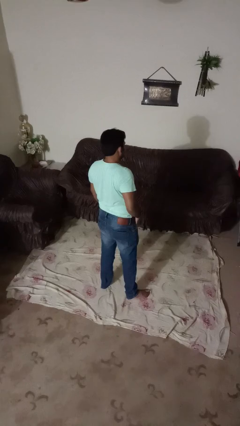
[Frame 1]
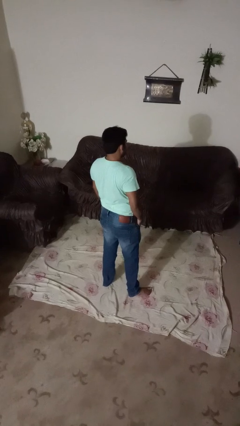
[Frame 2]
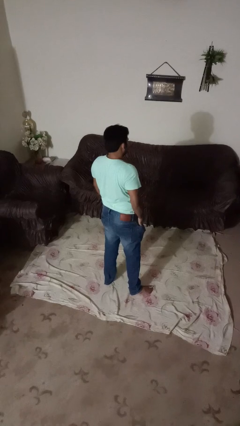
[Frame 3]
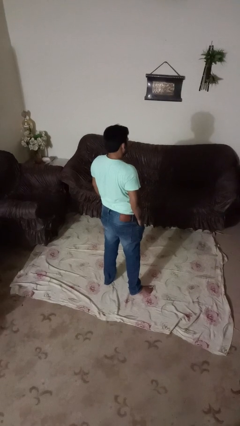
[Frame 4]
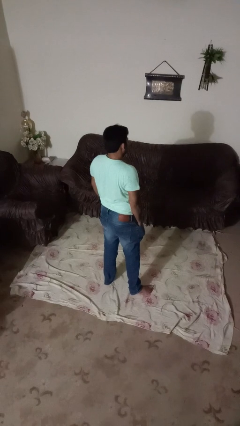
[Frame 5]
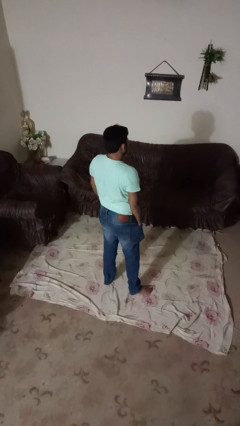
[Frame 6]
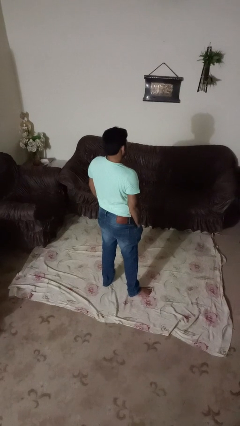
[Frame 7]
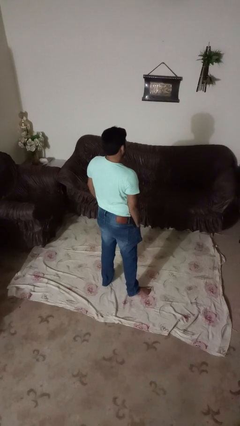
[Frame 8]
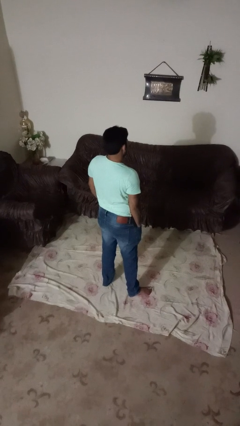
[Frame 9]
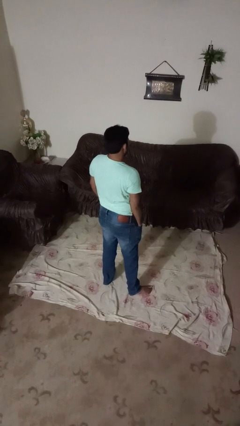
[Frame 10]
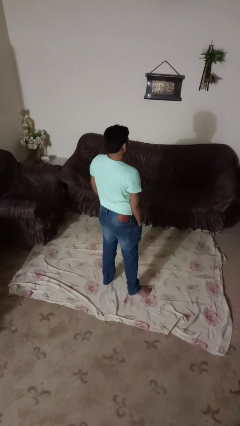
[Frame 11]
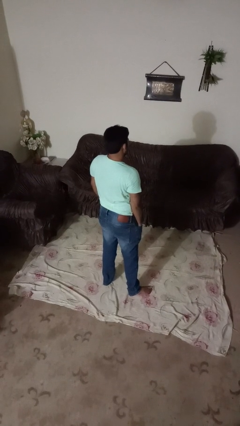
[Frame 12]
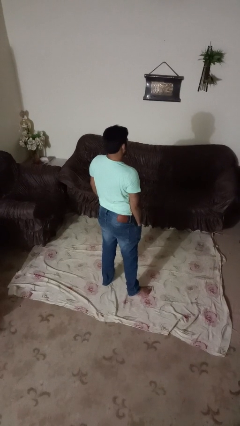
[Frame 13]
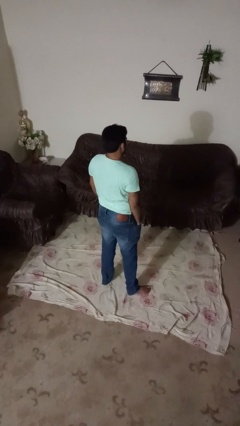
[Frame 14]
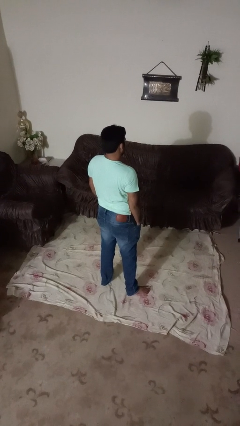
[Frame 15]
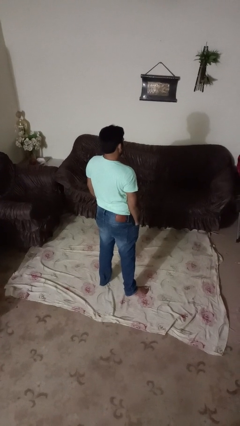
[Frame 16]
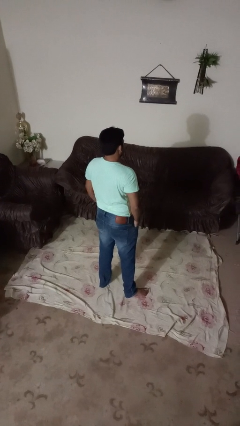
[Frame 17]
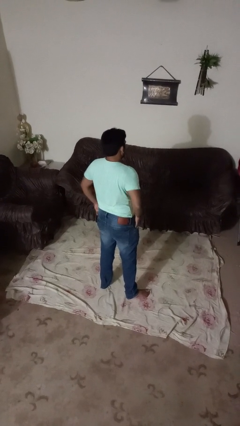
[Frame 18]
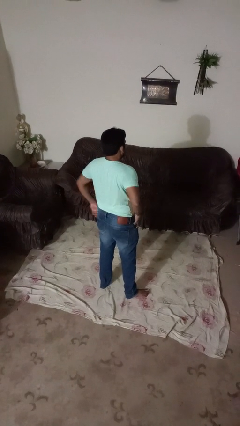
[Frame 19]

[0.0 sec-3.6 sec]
person puts hands in back pockets

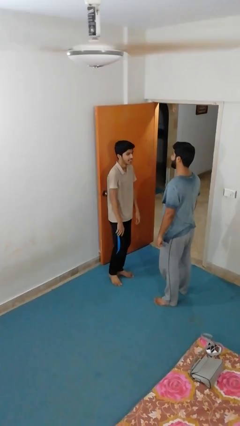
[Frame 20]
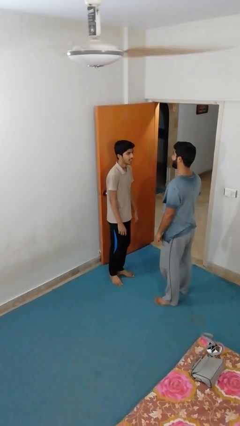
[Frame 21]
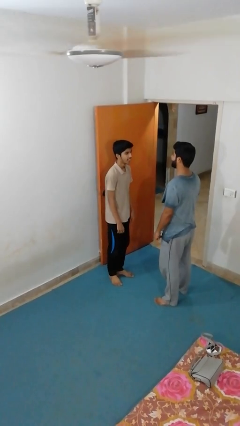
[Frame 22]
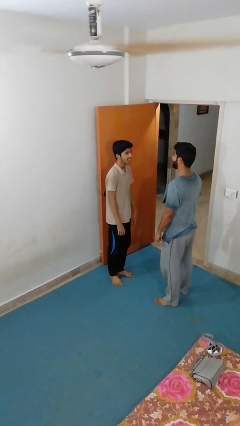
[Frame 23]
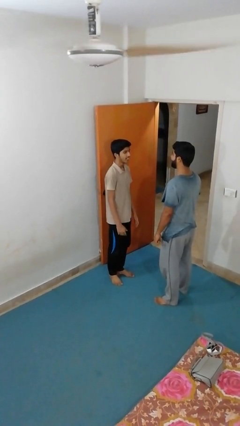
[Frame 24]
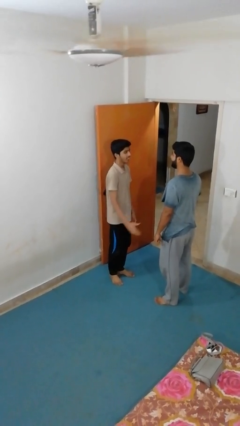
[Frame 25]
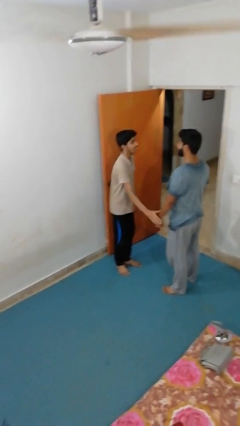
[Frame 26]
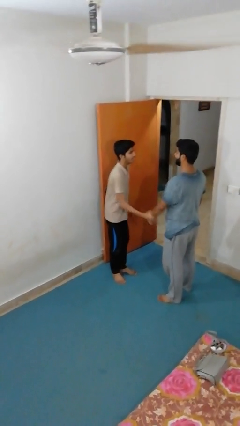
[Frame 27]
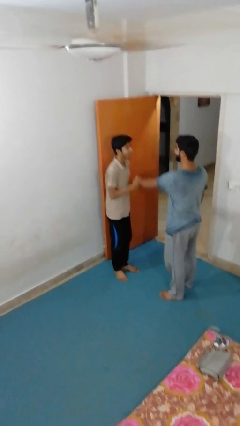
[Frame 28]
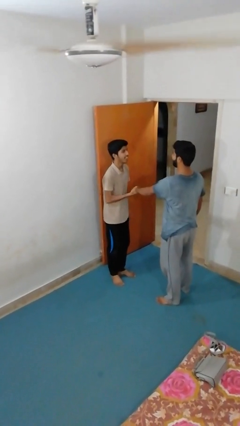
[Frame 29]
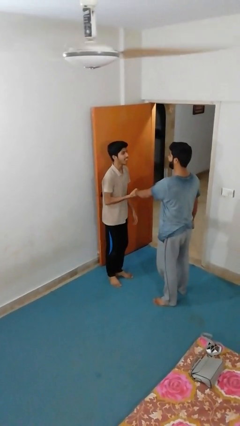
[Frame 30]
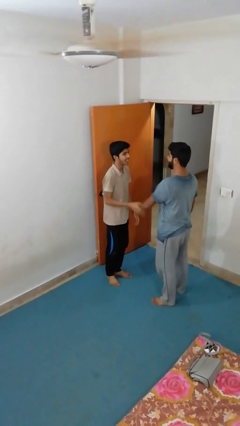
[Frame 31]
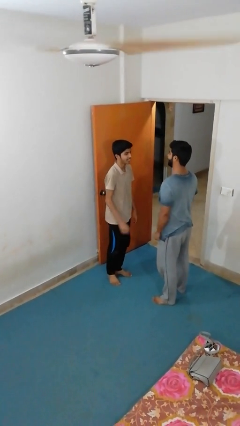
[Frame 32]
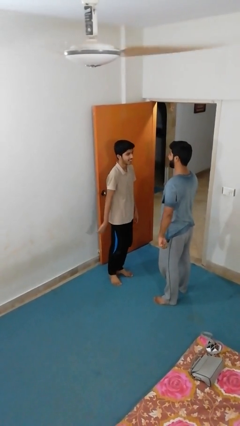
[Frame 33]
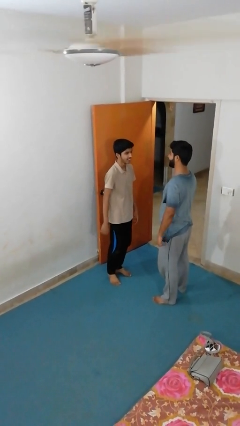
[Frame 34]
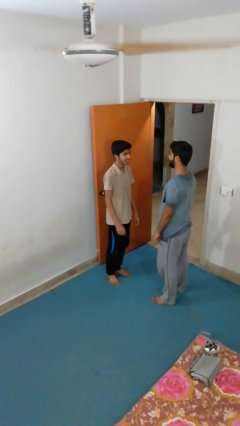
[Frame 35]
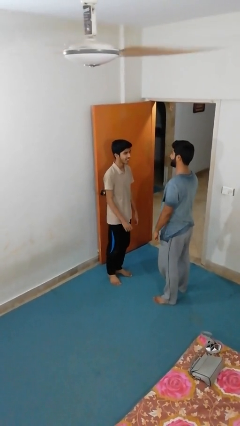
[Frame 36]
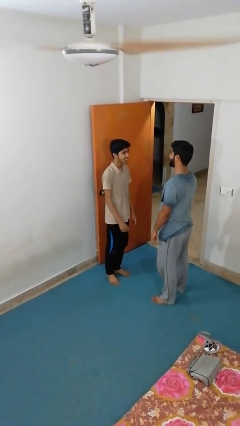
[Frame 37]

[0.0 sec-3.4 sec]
person grabs person by forearm

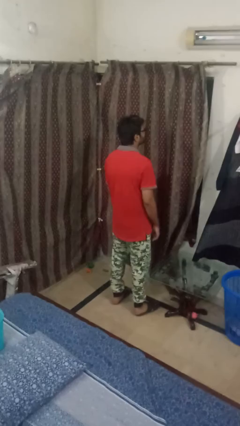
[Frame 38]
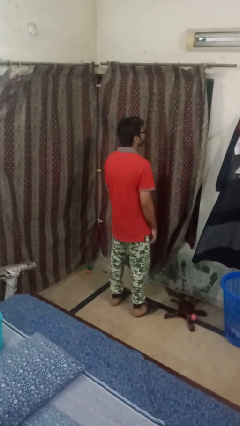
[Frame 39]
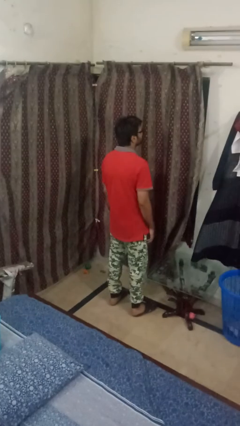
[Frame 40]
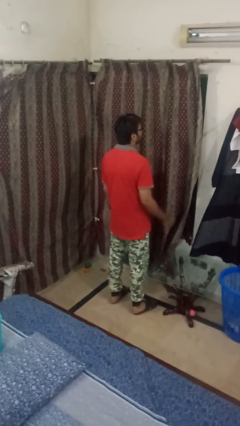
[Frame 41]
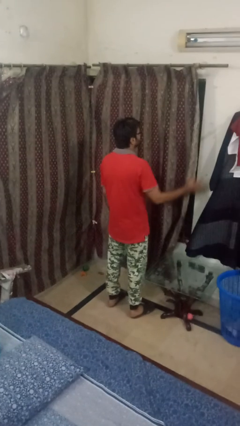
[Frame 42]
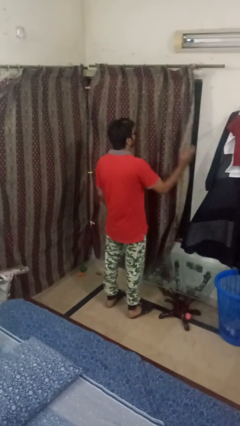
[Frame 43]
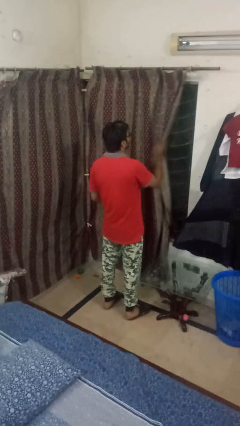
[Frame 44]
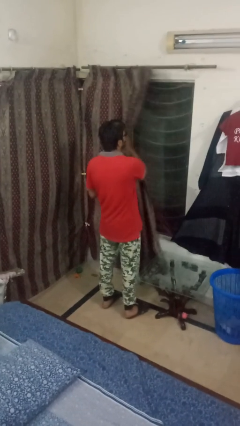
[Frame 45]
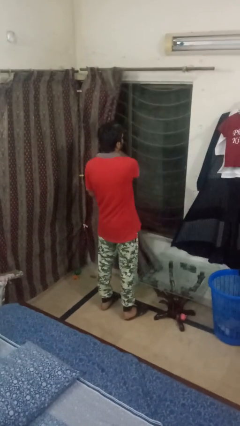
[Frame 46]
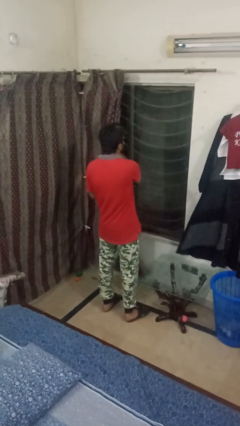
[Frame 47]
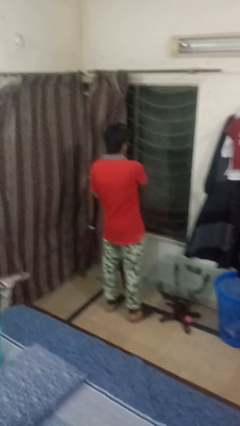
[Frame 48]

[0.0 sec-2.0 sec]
person opens curtains

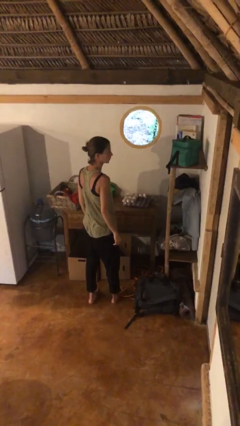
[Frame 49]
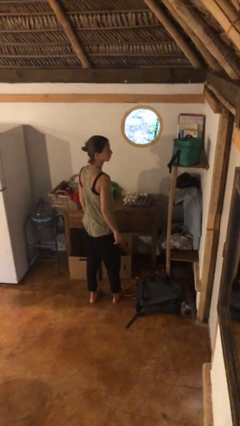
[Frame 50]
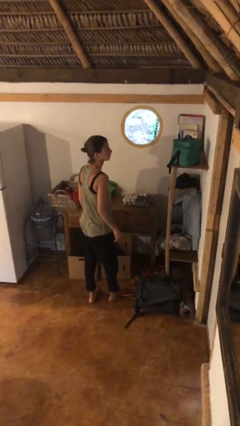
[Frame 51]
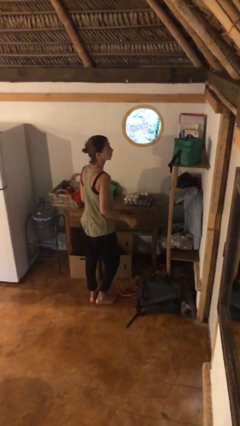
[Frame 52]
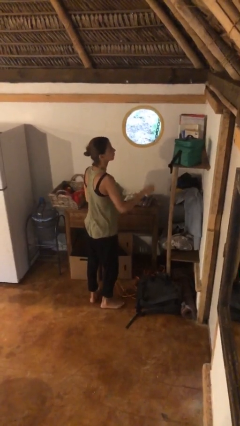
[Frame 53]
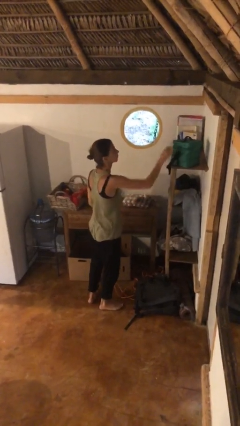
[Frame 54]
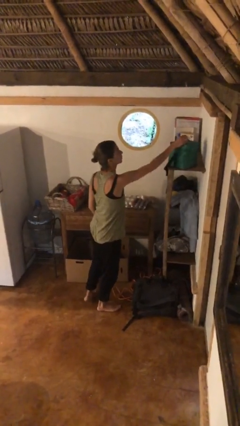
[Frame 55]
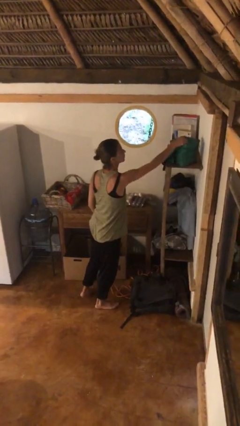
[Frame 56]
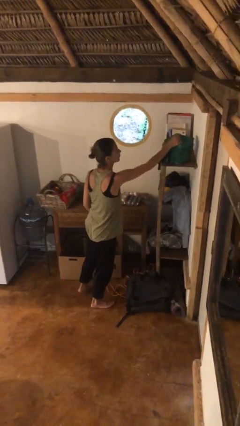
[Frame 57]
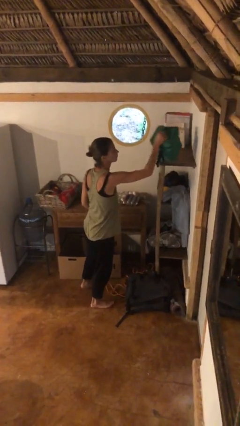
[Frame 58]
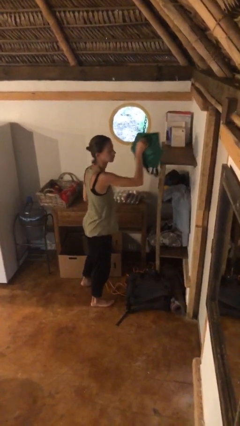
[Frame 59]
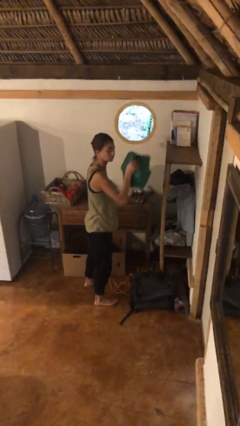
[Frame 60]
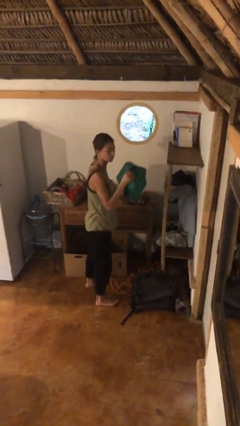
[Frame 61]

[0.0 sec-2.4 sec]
person picks up object from shelf

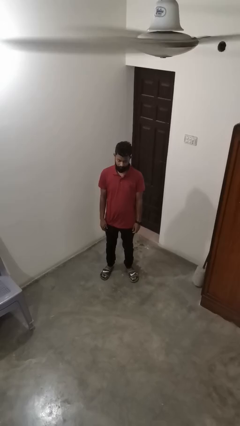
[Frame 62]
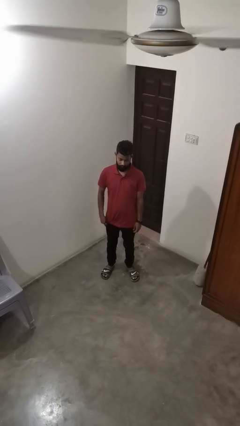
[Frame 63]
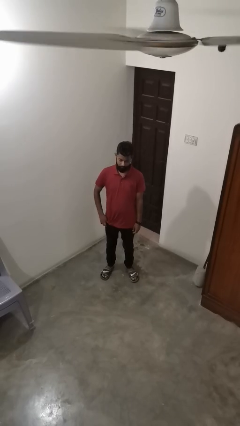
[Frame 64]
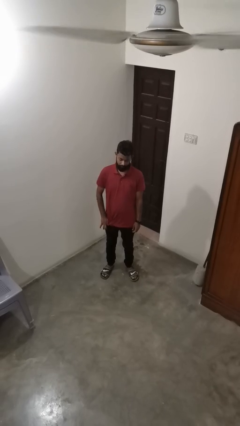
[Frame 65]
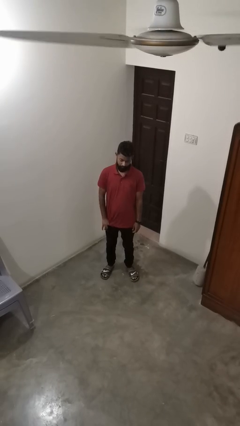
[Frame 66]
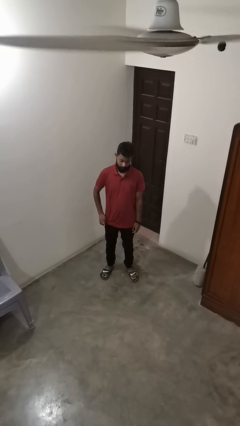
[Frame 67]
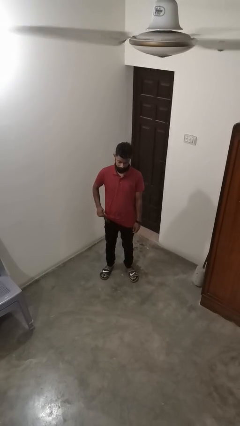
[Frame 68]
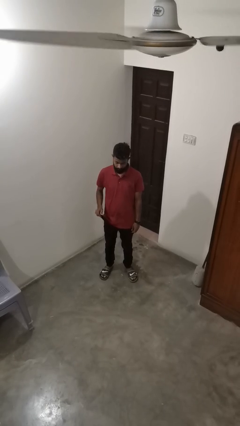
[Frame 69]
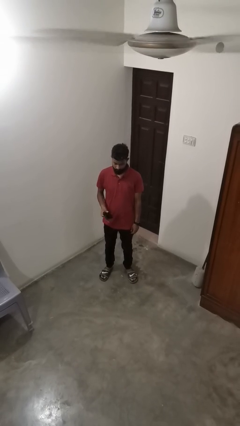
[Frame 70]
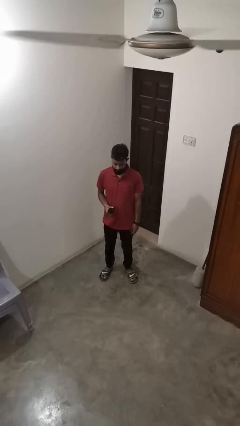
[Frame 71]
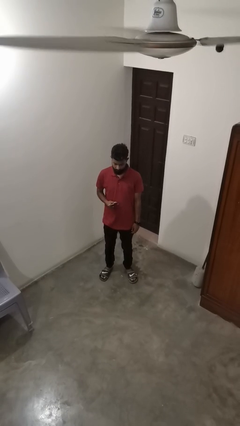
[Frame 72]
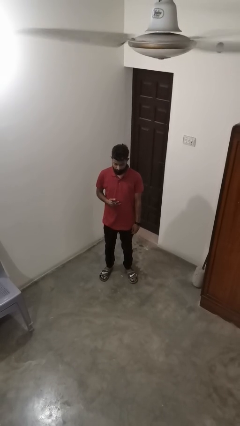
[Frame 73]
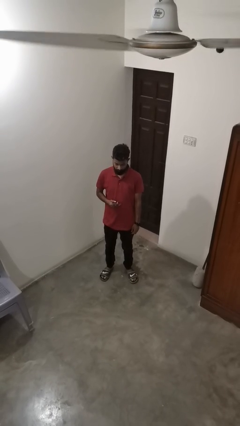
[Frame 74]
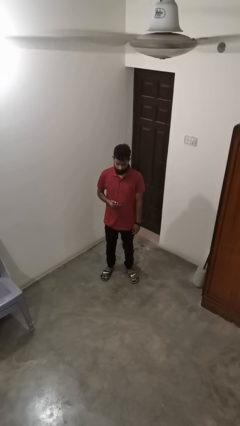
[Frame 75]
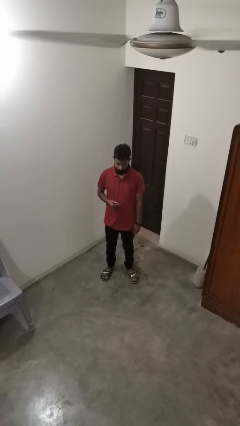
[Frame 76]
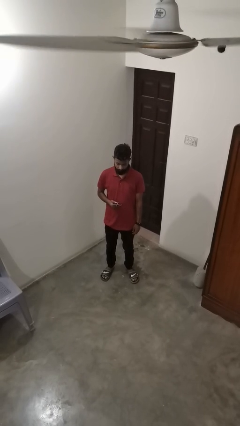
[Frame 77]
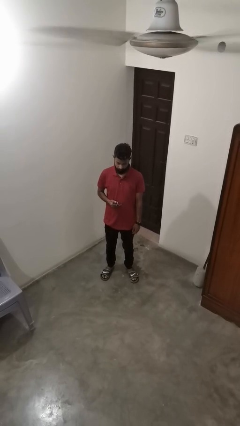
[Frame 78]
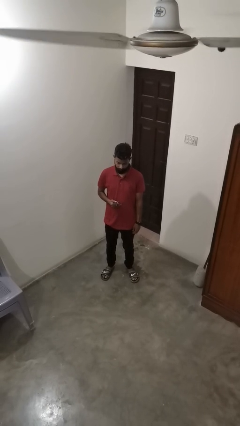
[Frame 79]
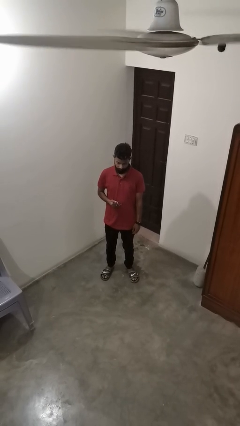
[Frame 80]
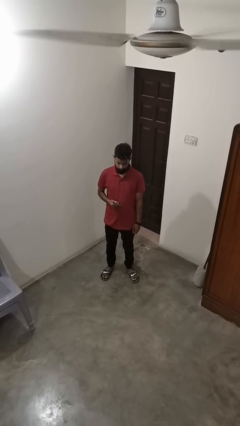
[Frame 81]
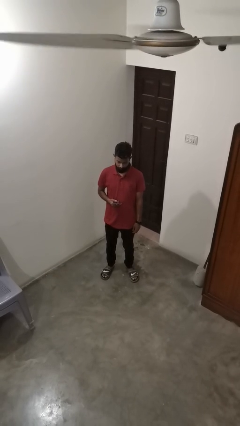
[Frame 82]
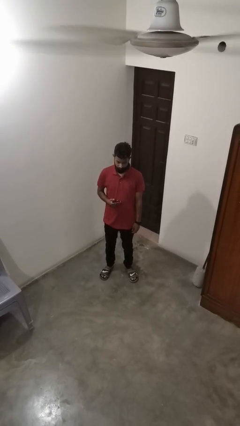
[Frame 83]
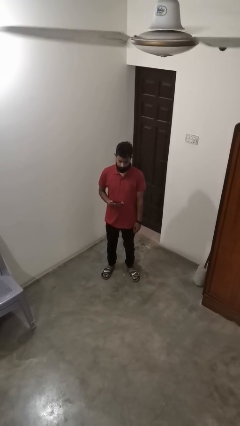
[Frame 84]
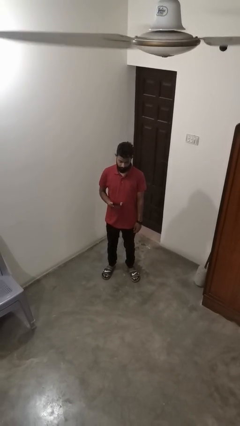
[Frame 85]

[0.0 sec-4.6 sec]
person takes phone from pocket

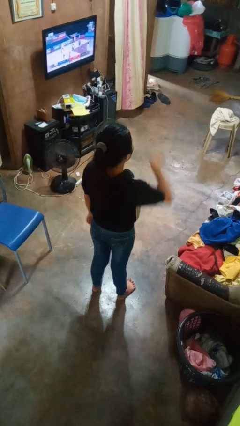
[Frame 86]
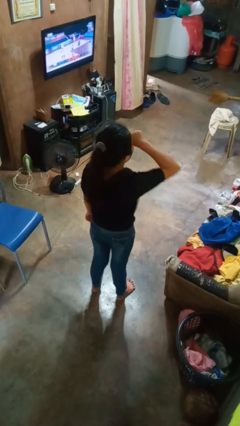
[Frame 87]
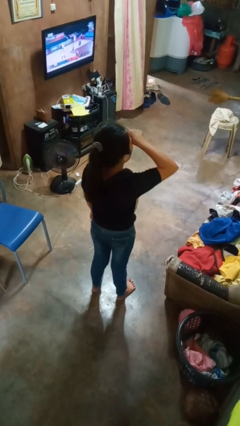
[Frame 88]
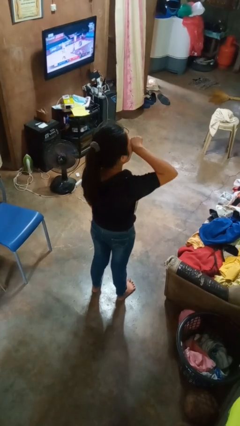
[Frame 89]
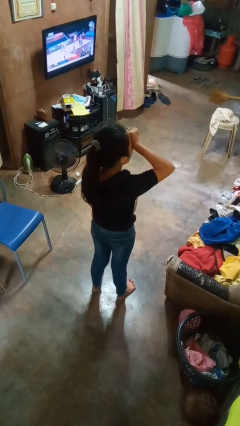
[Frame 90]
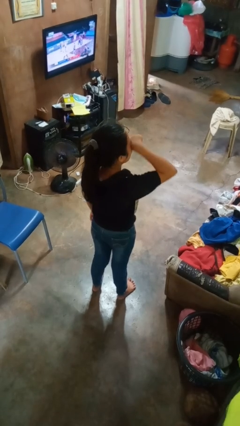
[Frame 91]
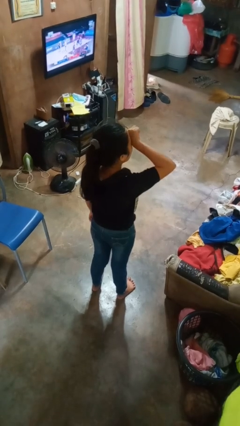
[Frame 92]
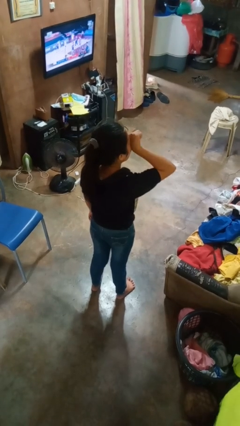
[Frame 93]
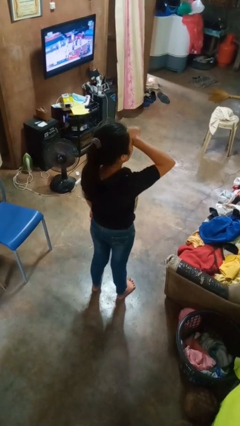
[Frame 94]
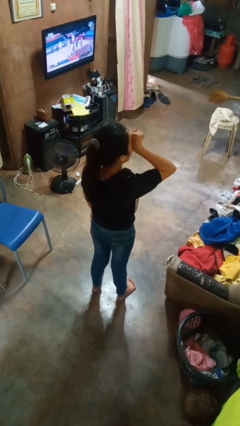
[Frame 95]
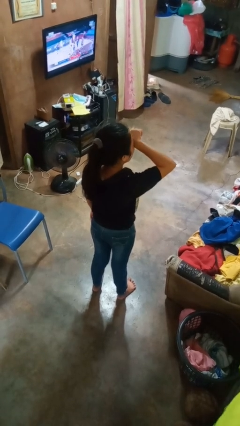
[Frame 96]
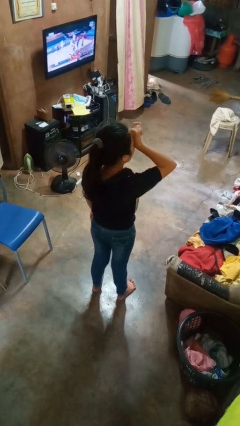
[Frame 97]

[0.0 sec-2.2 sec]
person rubs eyes
